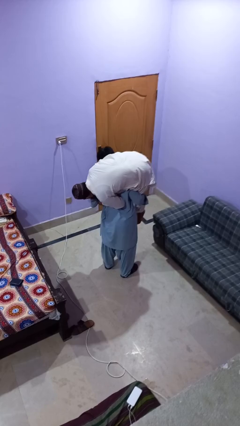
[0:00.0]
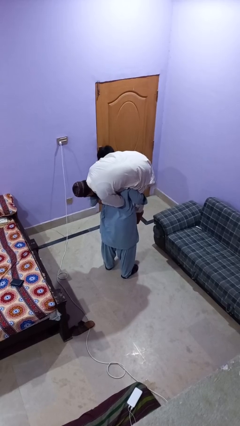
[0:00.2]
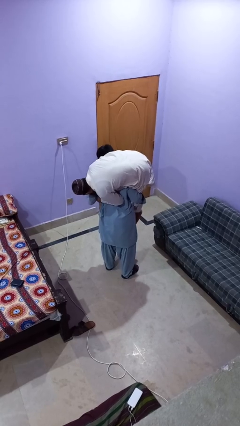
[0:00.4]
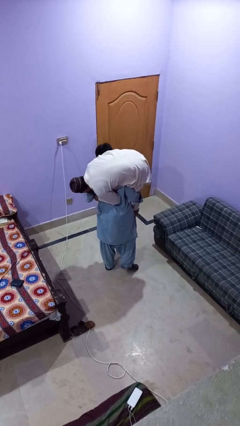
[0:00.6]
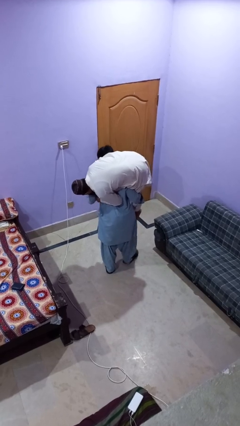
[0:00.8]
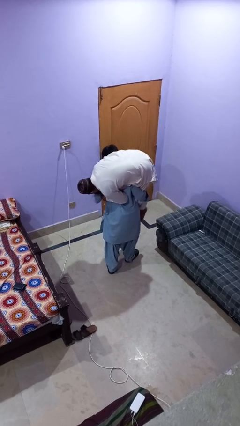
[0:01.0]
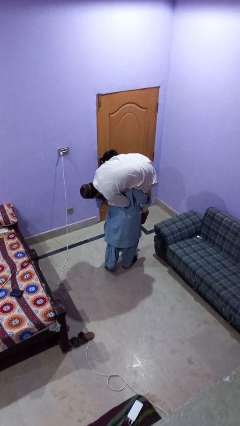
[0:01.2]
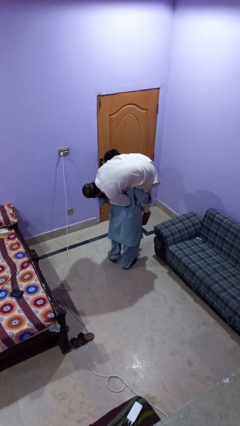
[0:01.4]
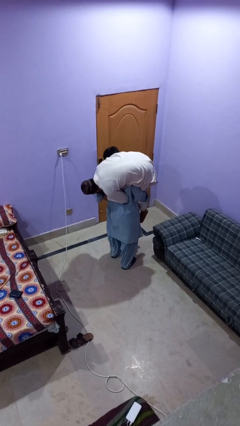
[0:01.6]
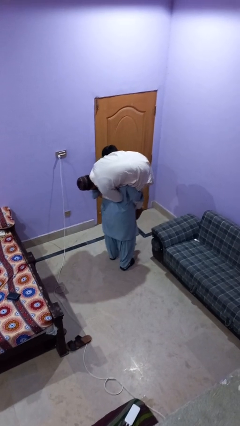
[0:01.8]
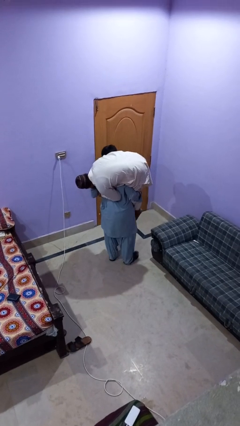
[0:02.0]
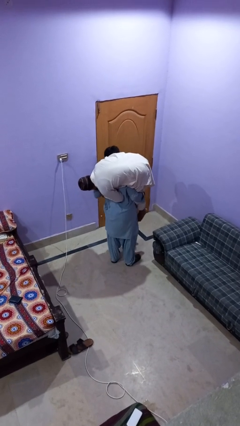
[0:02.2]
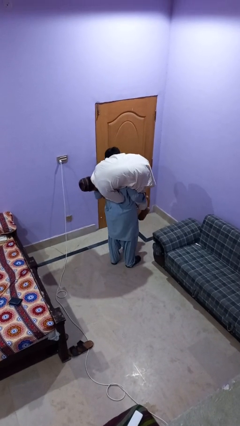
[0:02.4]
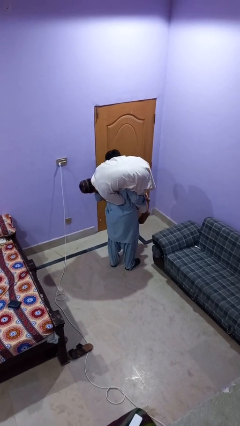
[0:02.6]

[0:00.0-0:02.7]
person carries person on shoulders

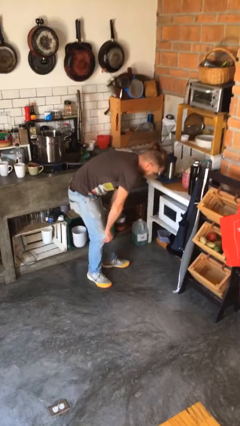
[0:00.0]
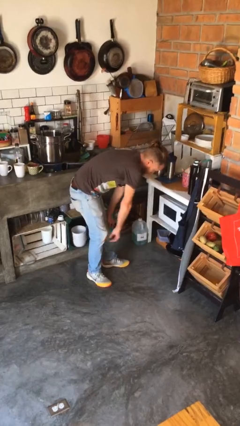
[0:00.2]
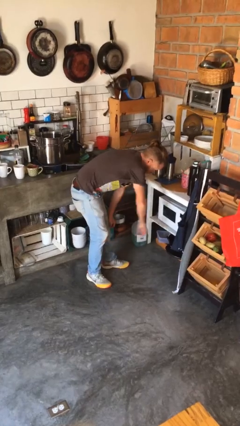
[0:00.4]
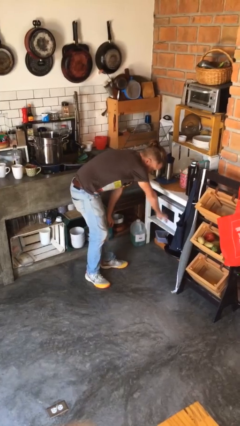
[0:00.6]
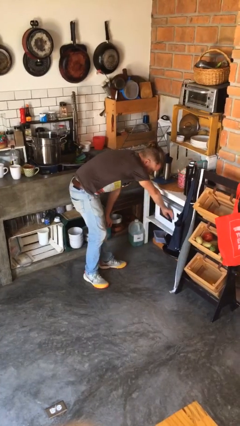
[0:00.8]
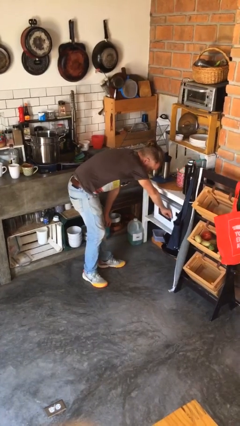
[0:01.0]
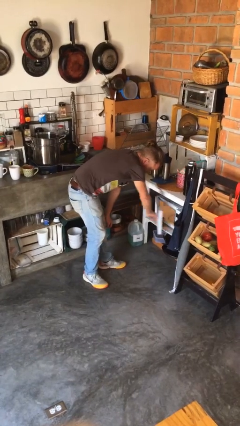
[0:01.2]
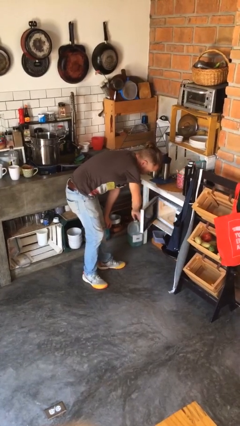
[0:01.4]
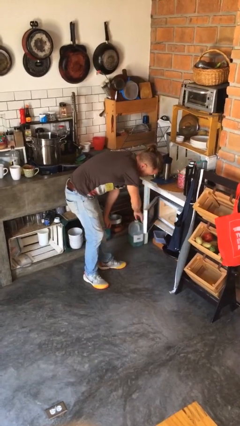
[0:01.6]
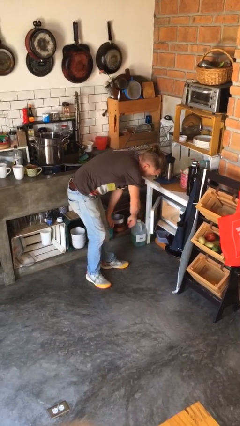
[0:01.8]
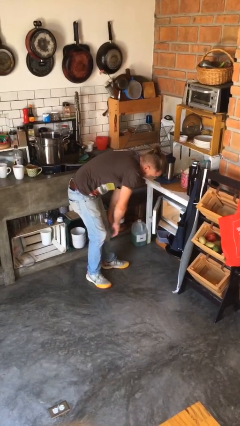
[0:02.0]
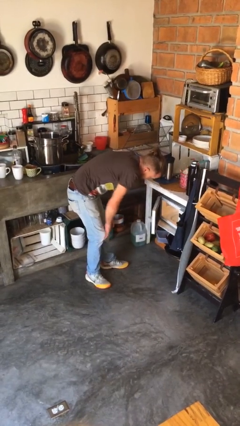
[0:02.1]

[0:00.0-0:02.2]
person opens microwave

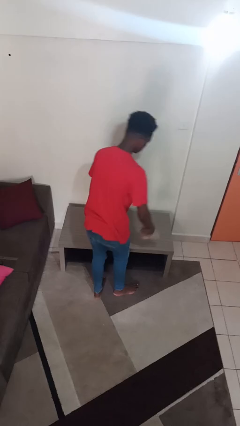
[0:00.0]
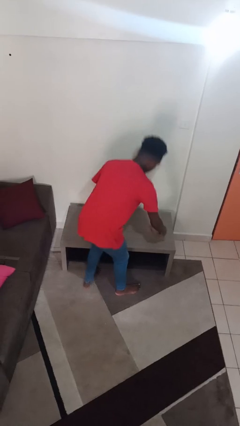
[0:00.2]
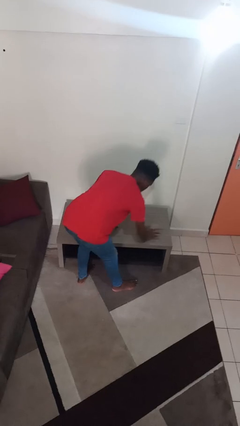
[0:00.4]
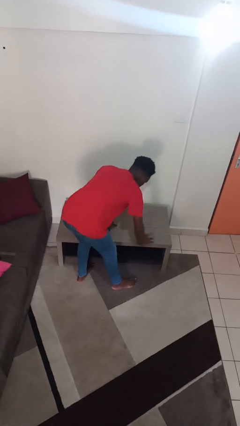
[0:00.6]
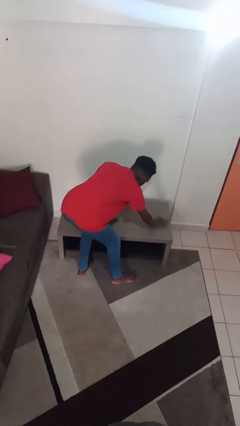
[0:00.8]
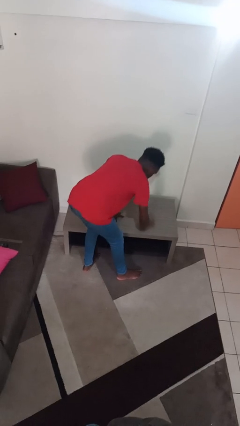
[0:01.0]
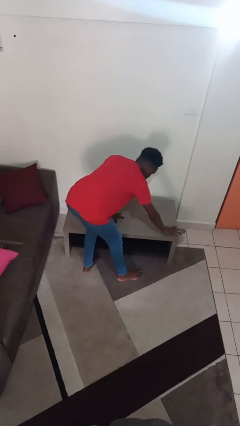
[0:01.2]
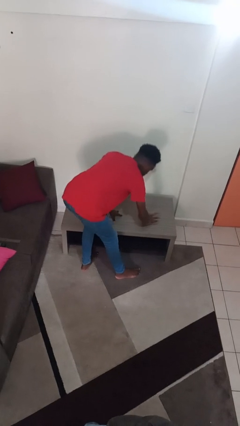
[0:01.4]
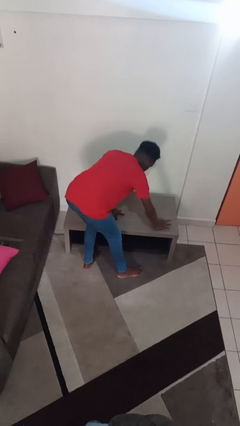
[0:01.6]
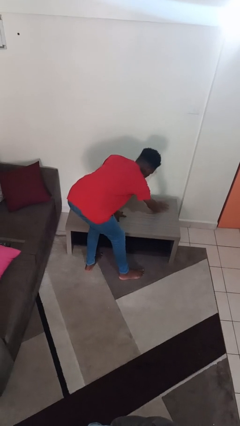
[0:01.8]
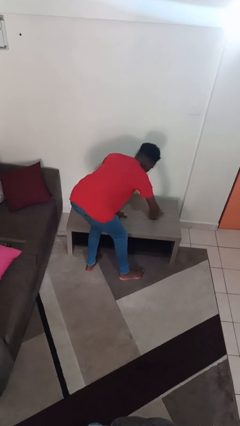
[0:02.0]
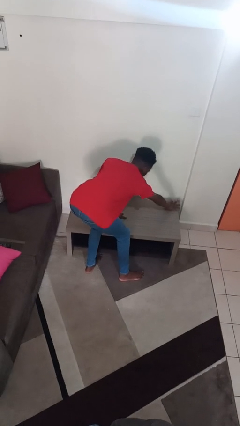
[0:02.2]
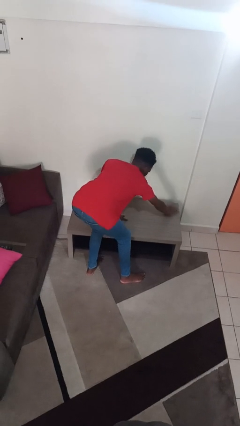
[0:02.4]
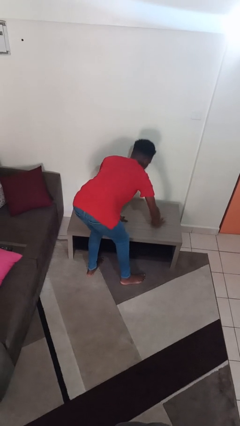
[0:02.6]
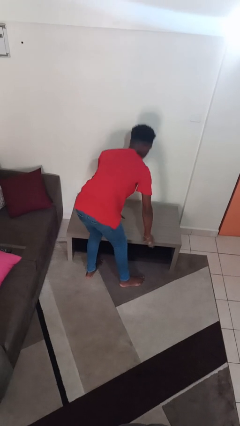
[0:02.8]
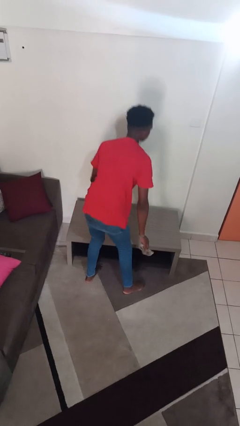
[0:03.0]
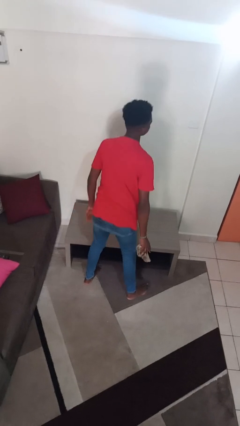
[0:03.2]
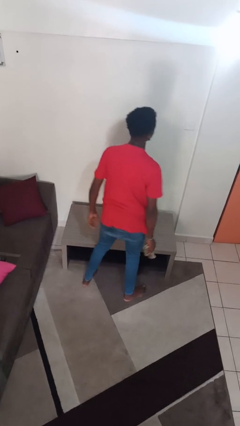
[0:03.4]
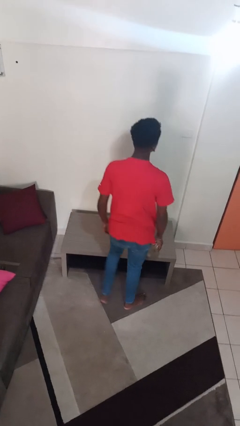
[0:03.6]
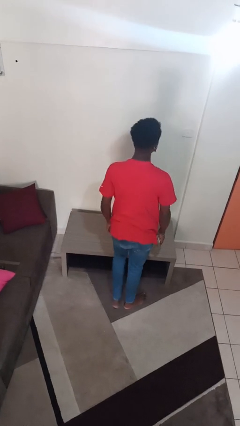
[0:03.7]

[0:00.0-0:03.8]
person cleans table with rag

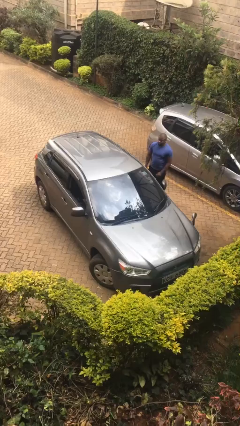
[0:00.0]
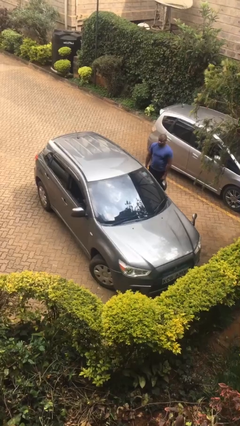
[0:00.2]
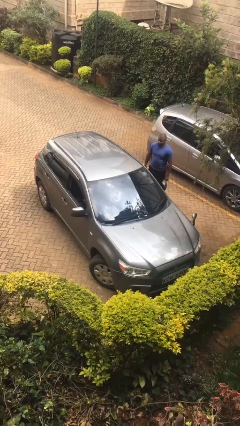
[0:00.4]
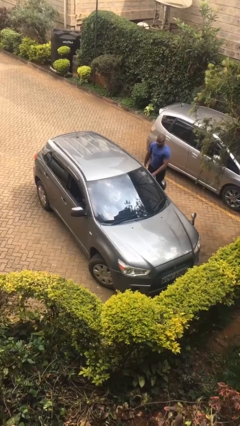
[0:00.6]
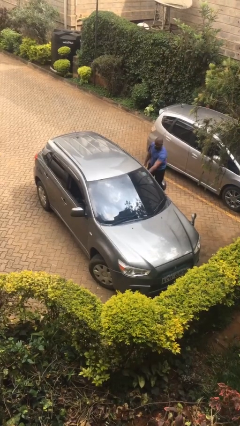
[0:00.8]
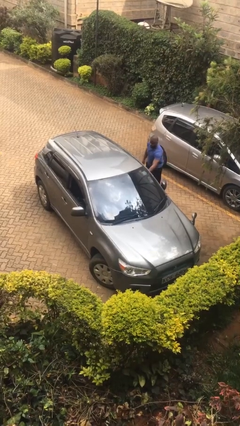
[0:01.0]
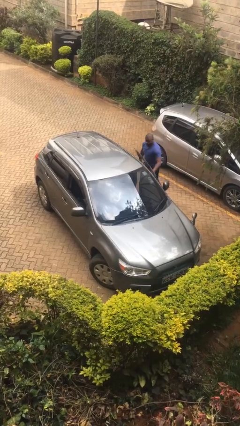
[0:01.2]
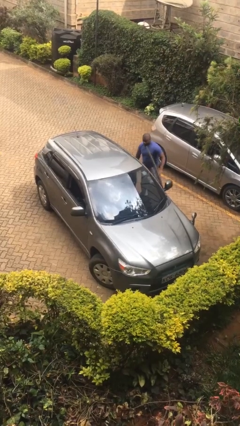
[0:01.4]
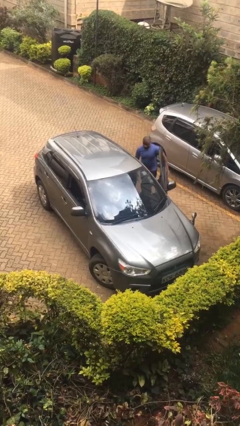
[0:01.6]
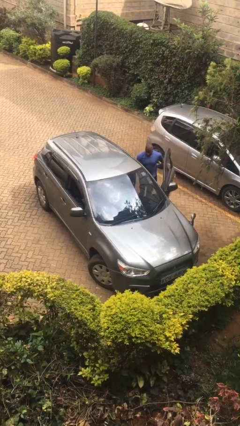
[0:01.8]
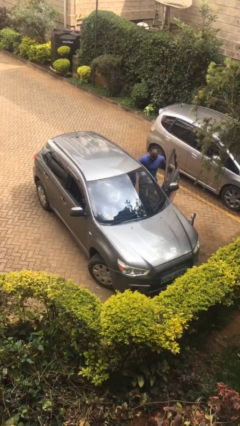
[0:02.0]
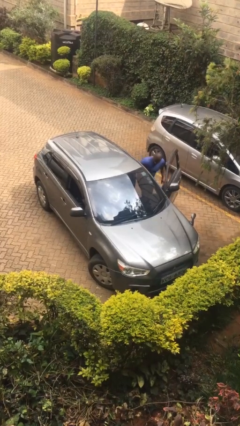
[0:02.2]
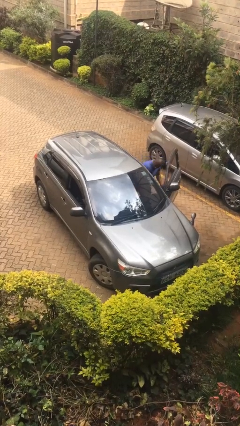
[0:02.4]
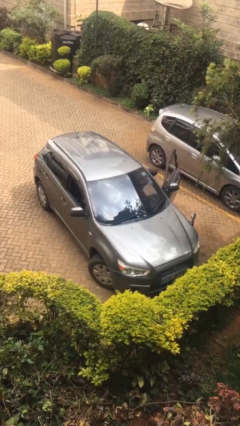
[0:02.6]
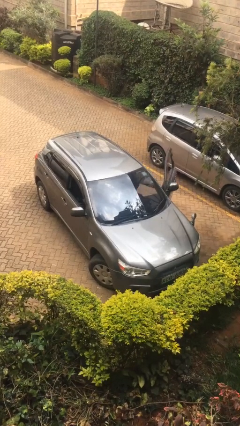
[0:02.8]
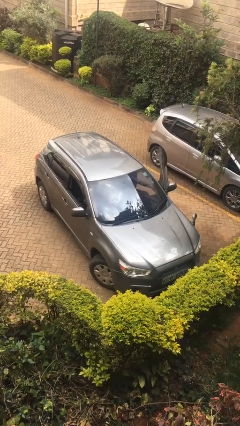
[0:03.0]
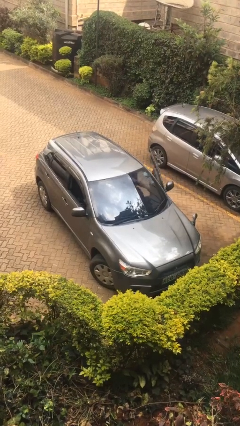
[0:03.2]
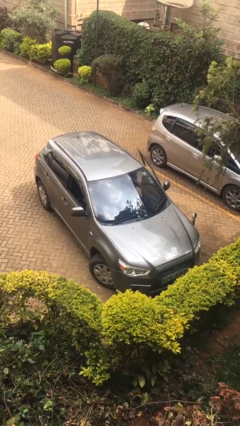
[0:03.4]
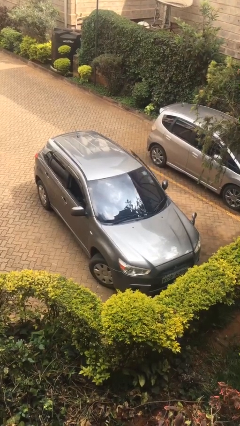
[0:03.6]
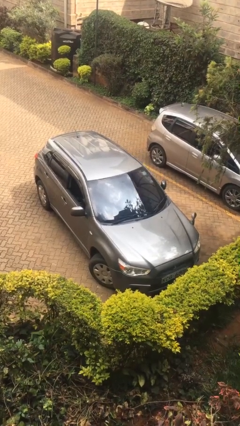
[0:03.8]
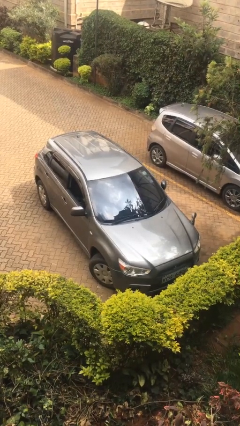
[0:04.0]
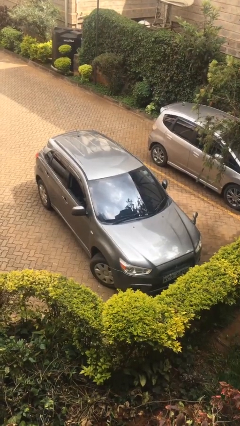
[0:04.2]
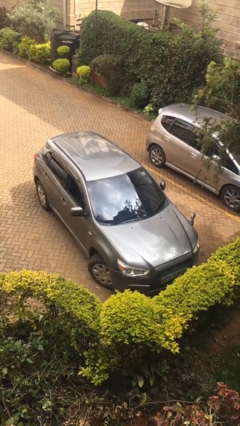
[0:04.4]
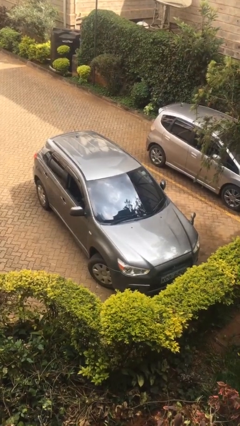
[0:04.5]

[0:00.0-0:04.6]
car picks up person

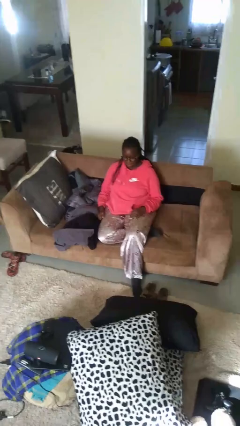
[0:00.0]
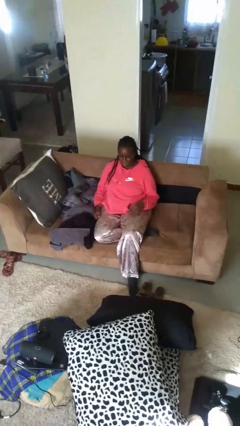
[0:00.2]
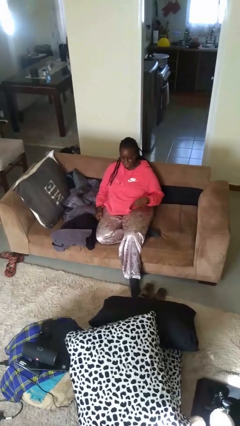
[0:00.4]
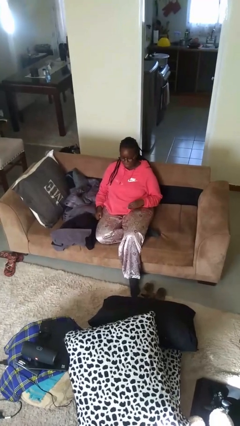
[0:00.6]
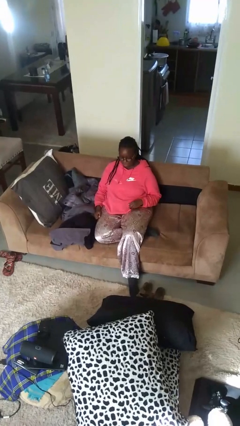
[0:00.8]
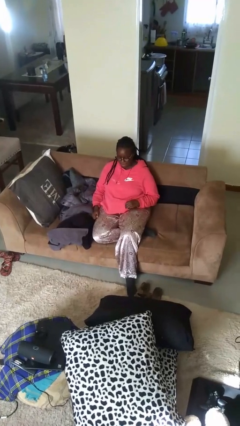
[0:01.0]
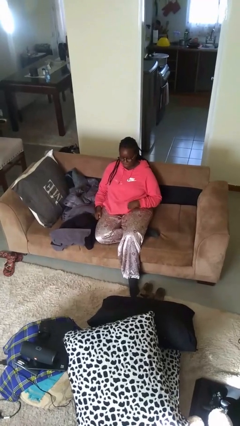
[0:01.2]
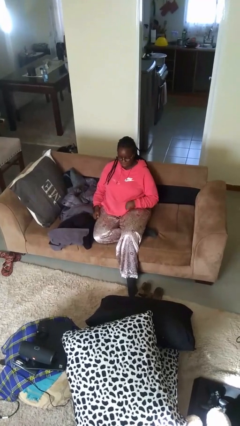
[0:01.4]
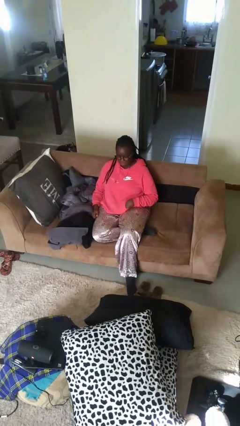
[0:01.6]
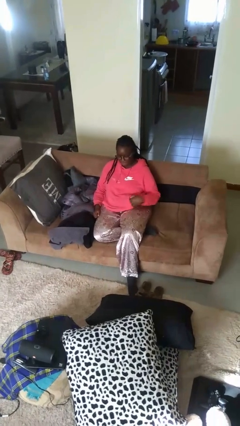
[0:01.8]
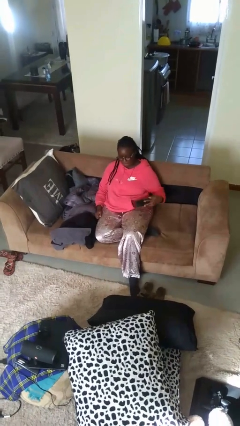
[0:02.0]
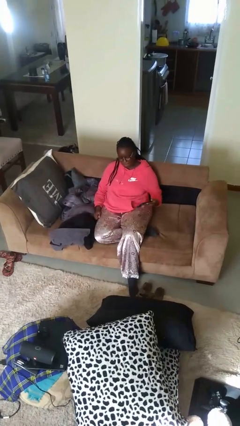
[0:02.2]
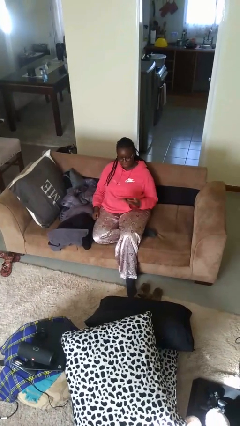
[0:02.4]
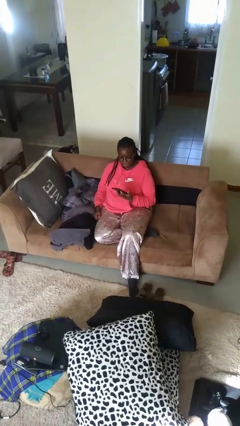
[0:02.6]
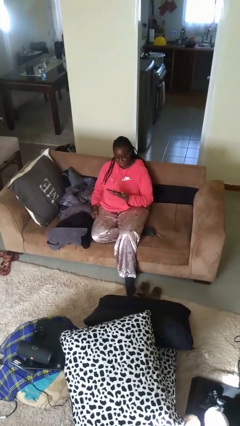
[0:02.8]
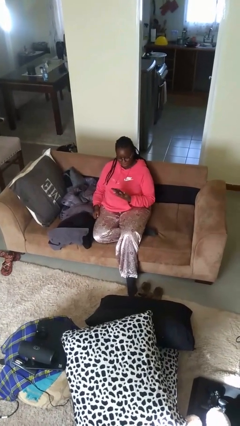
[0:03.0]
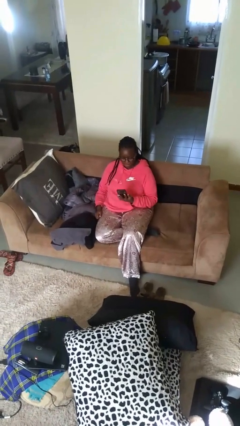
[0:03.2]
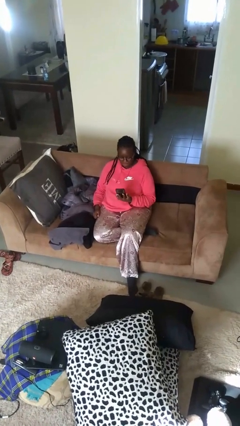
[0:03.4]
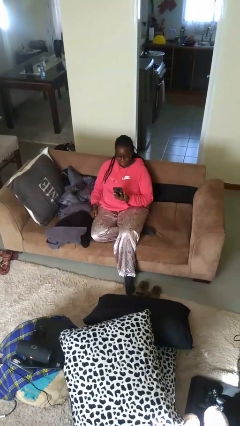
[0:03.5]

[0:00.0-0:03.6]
person takes phone from pocket

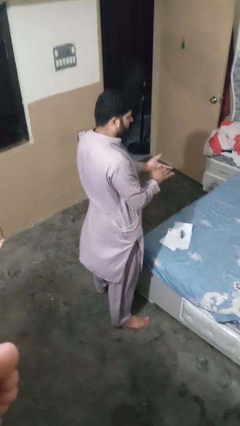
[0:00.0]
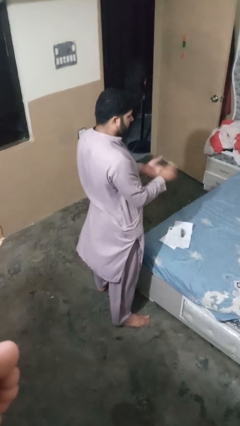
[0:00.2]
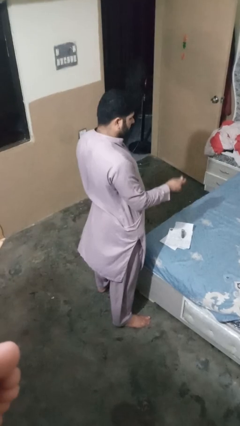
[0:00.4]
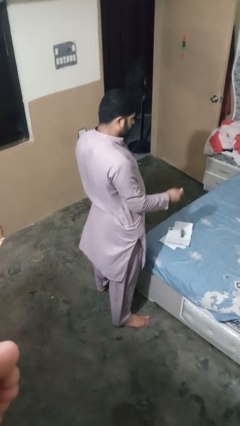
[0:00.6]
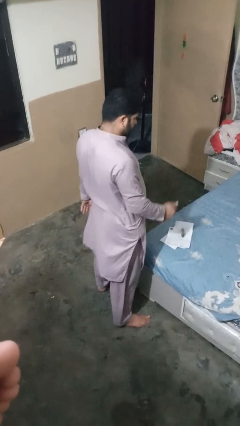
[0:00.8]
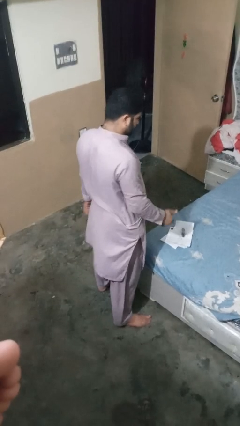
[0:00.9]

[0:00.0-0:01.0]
person crumples paper
